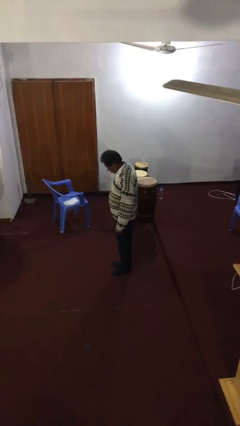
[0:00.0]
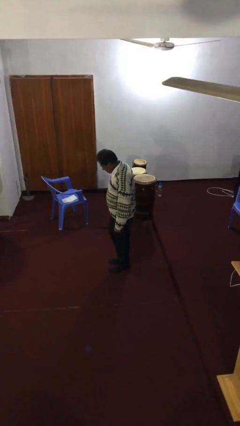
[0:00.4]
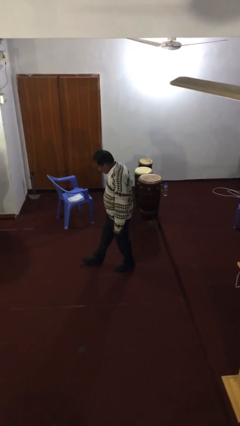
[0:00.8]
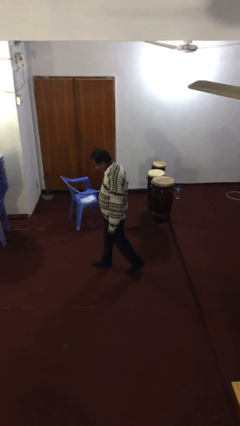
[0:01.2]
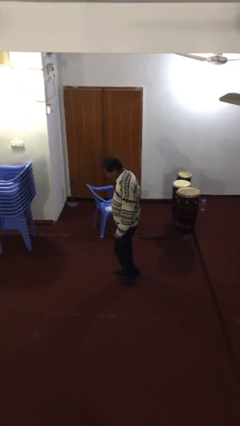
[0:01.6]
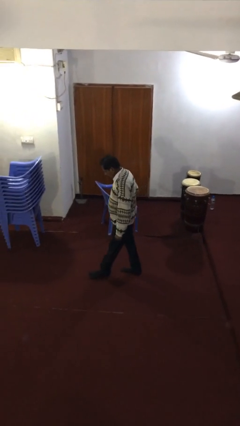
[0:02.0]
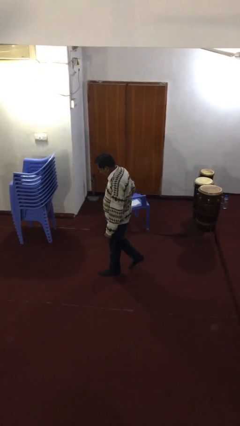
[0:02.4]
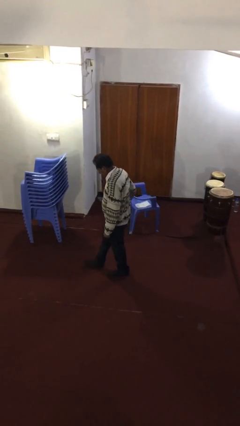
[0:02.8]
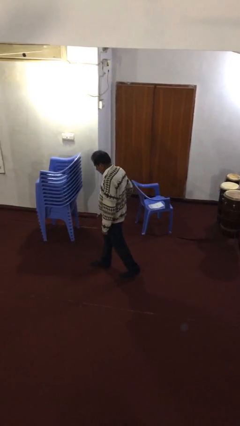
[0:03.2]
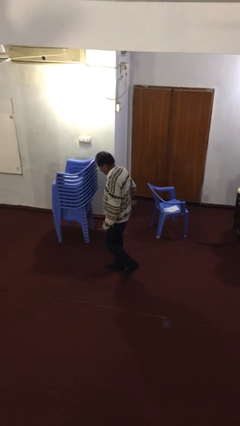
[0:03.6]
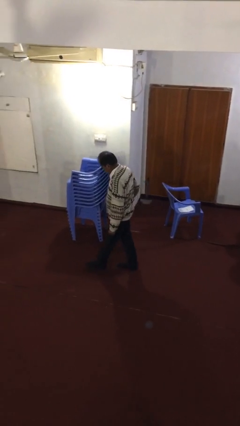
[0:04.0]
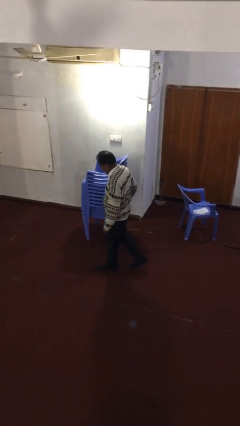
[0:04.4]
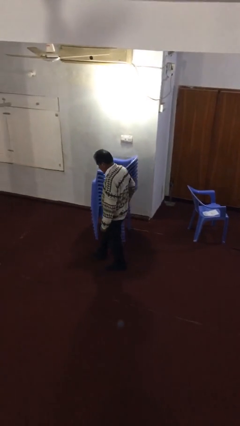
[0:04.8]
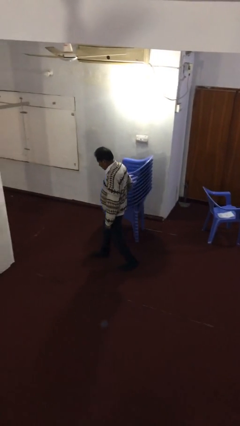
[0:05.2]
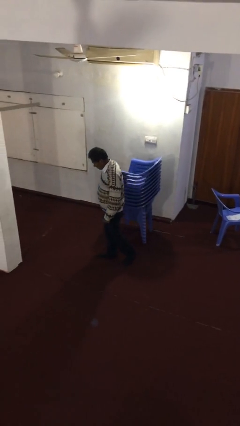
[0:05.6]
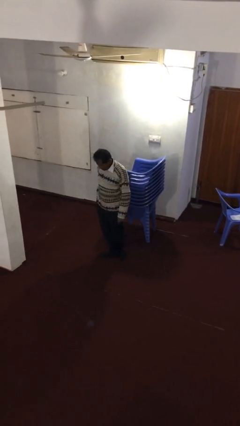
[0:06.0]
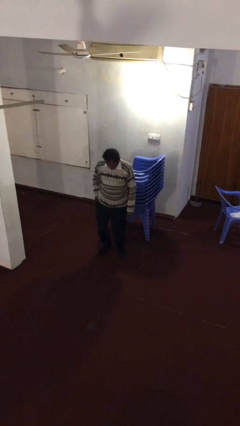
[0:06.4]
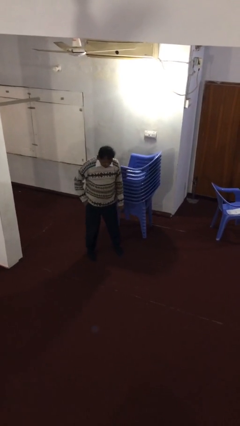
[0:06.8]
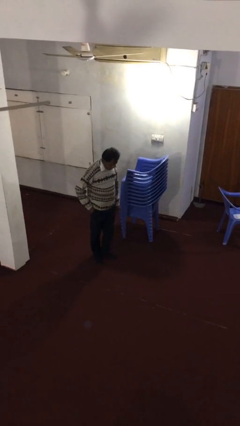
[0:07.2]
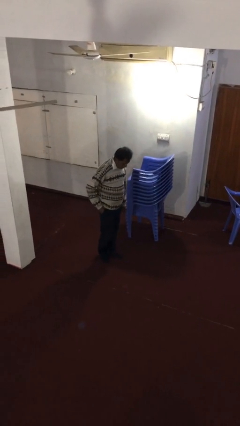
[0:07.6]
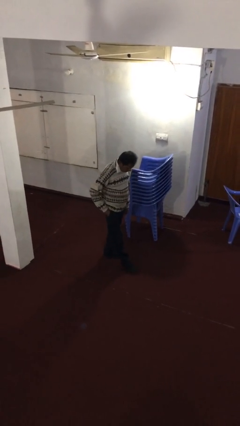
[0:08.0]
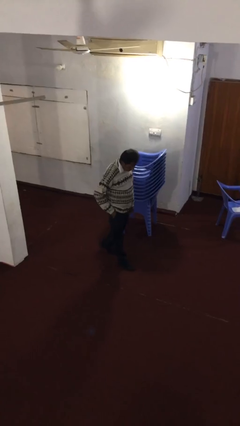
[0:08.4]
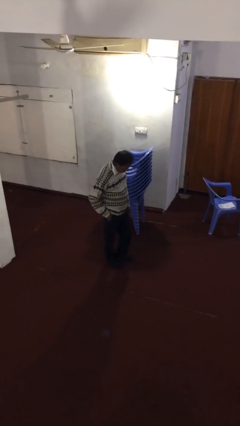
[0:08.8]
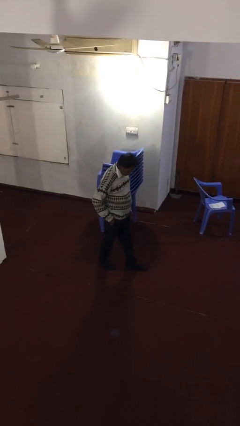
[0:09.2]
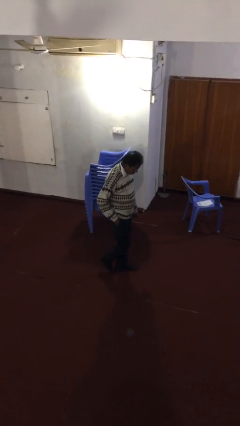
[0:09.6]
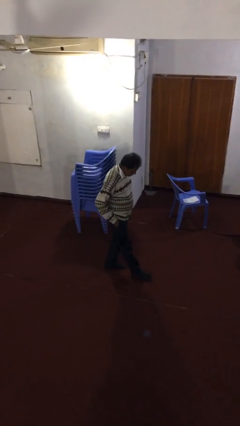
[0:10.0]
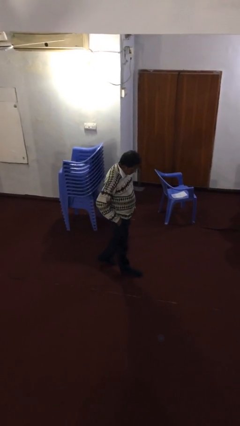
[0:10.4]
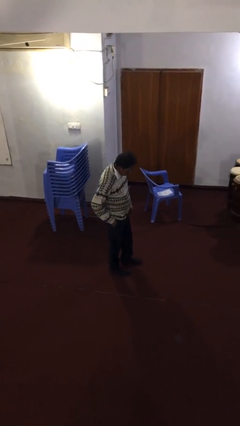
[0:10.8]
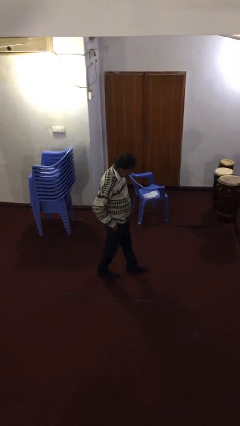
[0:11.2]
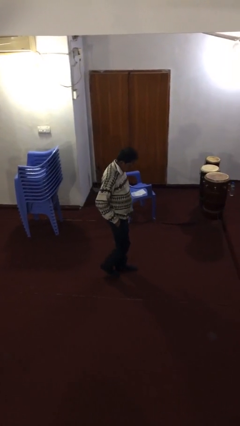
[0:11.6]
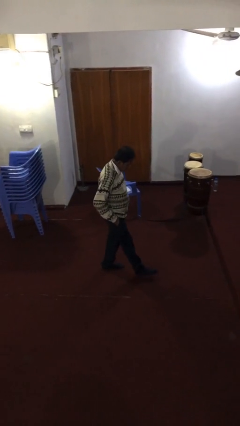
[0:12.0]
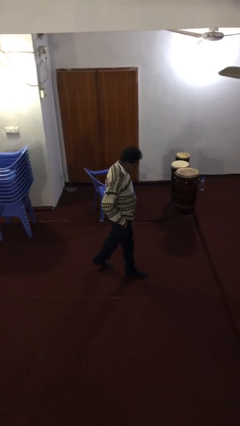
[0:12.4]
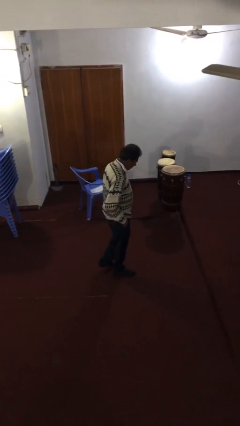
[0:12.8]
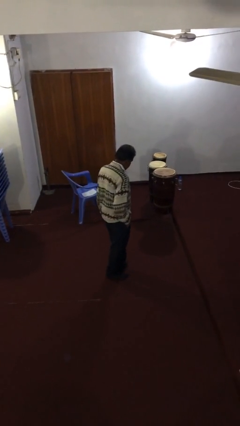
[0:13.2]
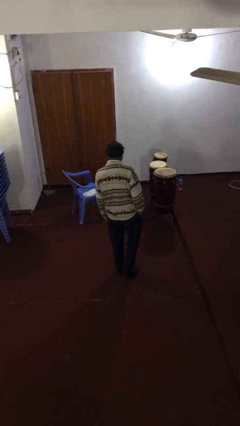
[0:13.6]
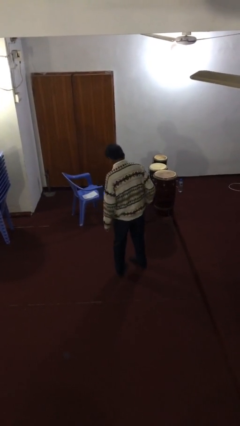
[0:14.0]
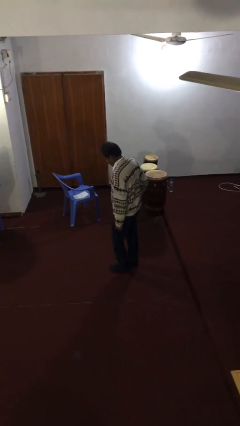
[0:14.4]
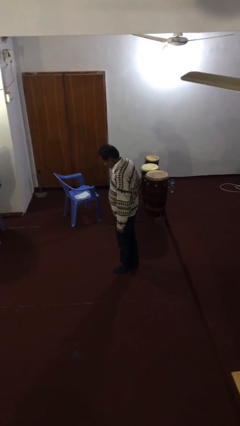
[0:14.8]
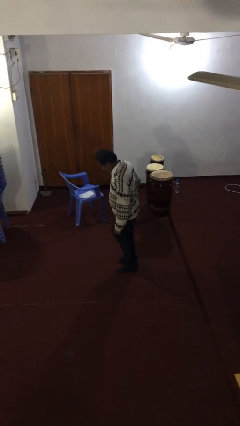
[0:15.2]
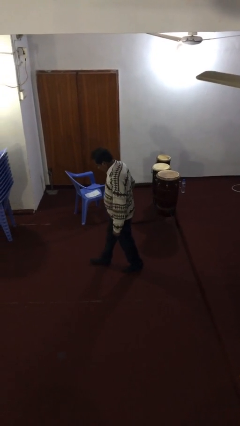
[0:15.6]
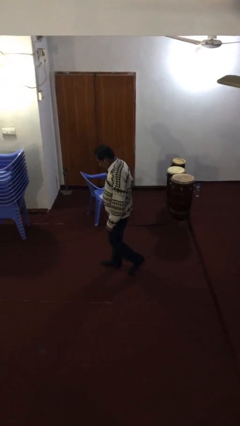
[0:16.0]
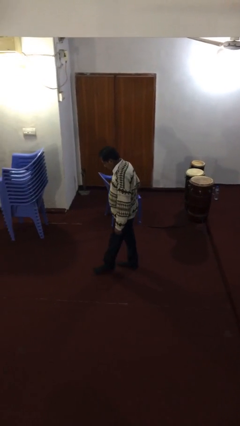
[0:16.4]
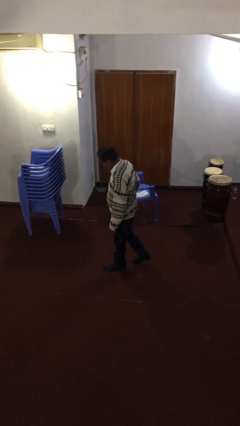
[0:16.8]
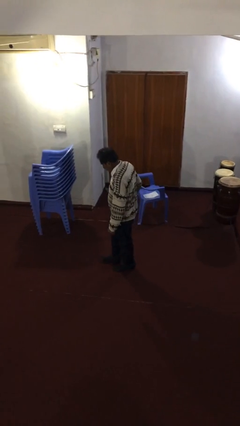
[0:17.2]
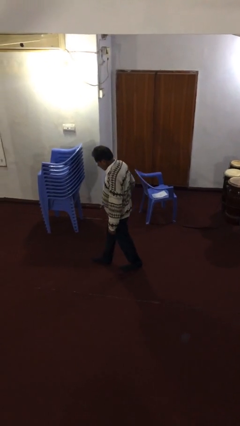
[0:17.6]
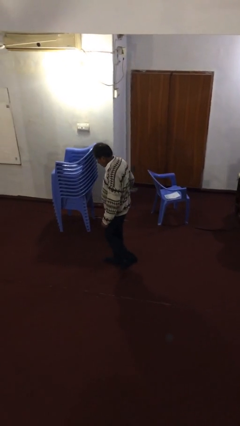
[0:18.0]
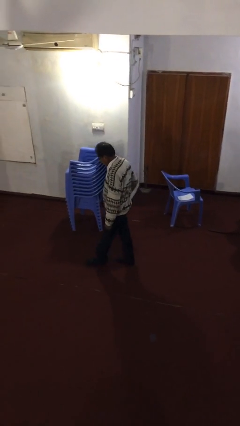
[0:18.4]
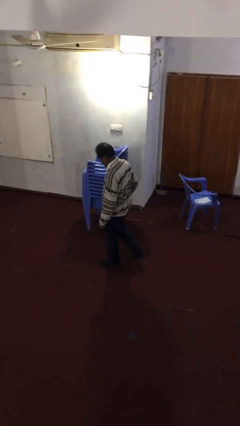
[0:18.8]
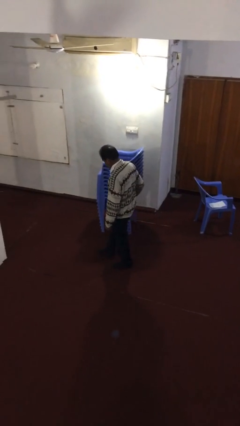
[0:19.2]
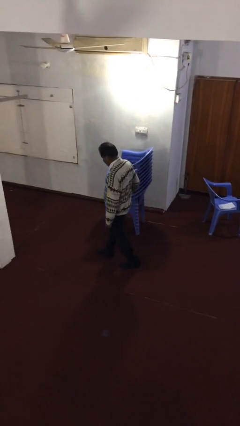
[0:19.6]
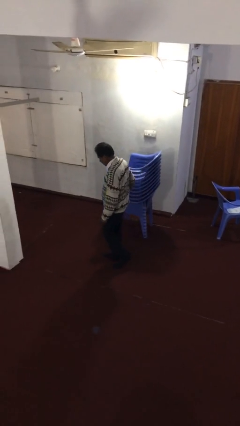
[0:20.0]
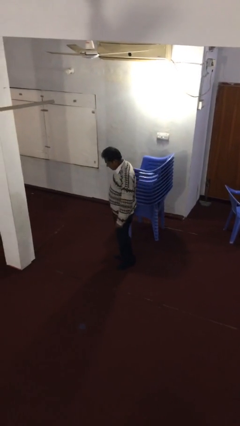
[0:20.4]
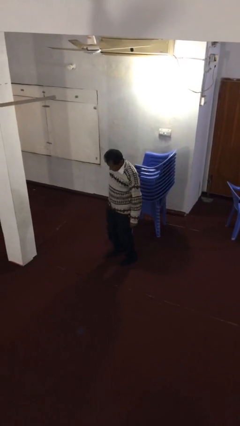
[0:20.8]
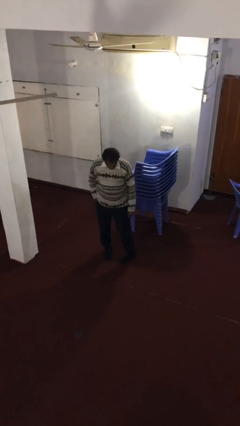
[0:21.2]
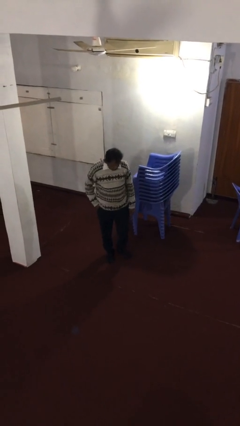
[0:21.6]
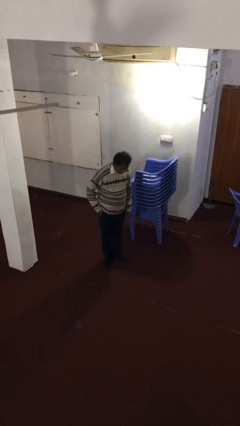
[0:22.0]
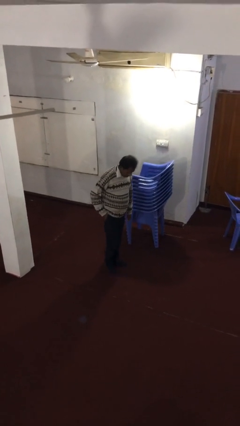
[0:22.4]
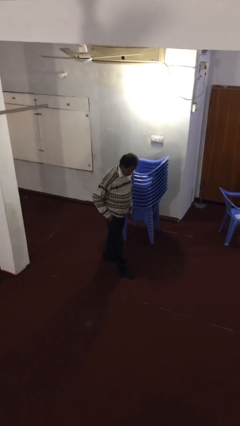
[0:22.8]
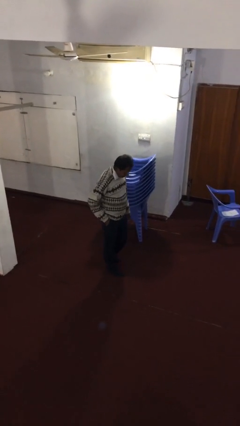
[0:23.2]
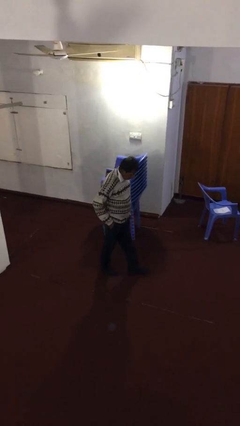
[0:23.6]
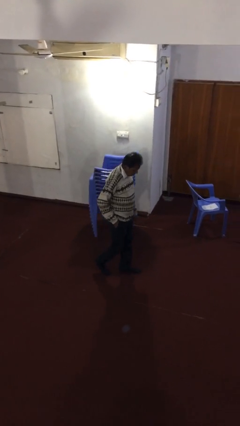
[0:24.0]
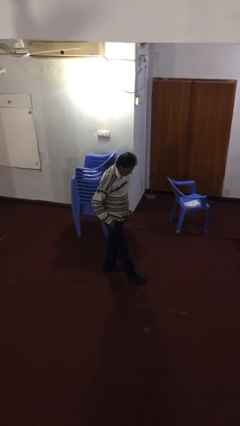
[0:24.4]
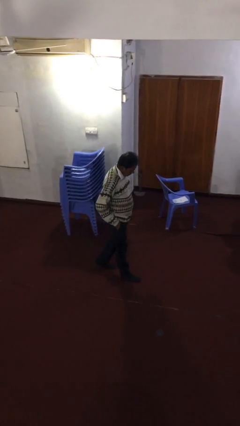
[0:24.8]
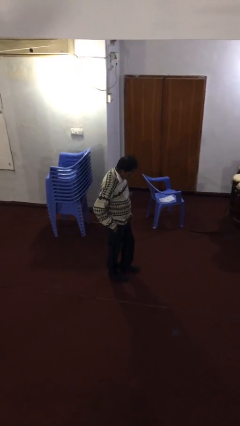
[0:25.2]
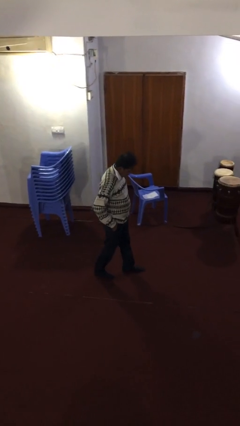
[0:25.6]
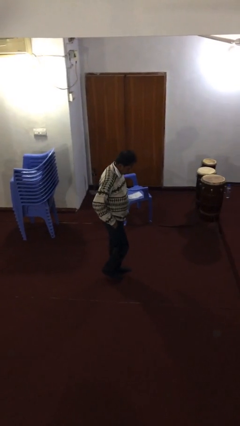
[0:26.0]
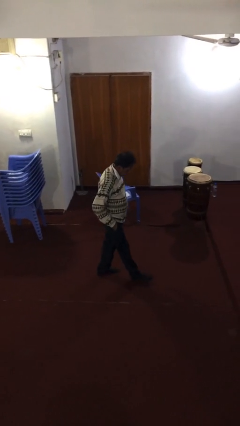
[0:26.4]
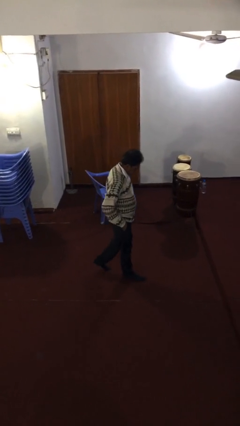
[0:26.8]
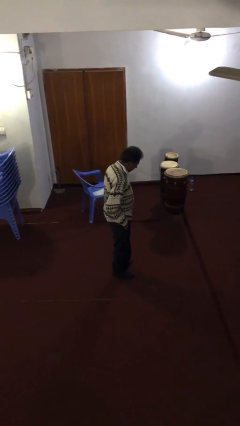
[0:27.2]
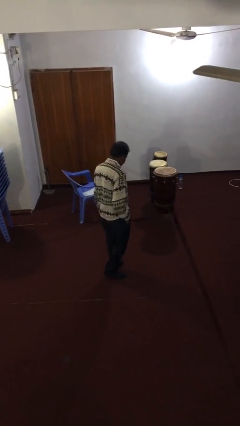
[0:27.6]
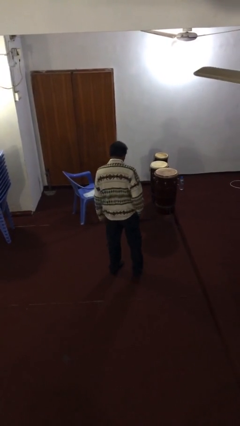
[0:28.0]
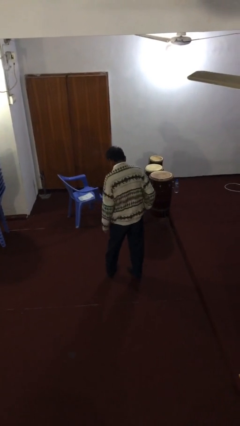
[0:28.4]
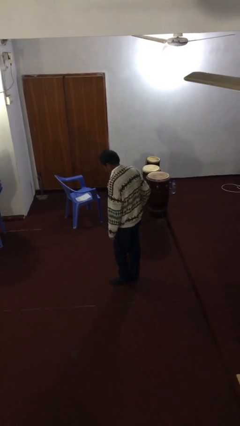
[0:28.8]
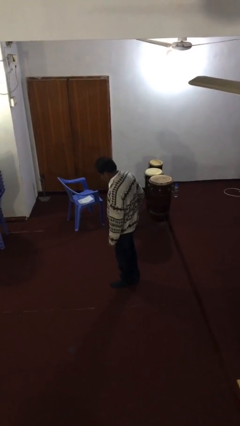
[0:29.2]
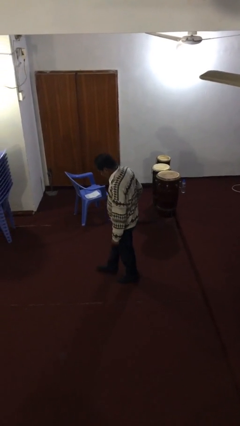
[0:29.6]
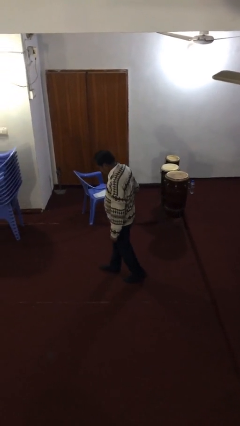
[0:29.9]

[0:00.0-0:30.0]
person walks

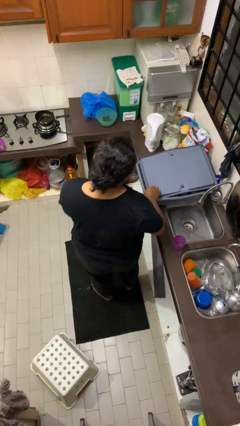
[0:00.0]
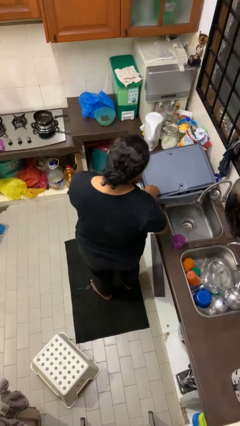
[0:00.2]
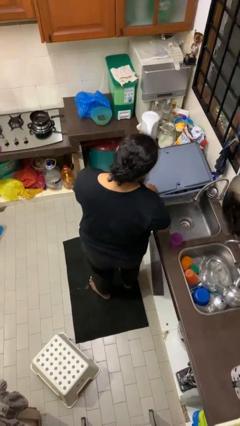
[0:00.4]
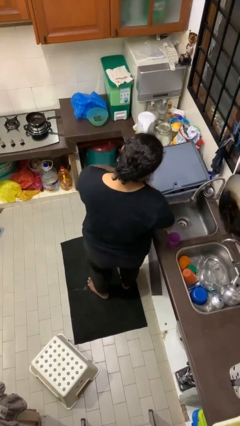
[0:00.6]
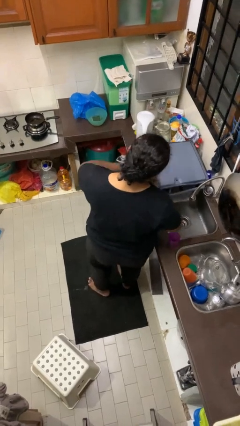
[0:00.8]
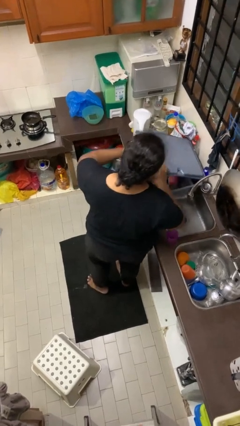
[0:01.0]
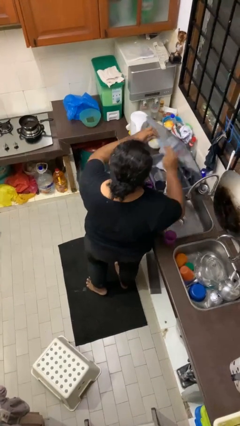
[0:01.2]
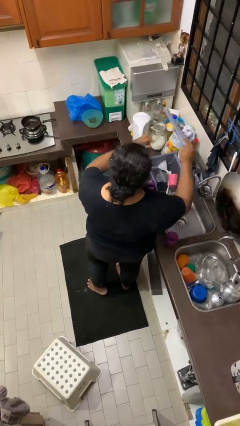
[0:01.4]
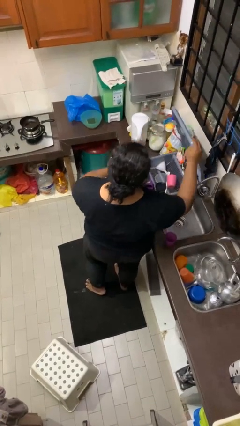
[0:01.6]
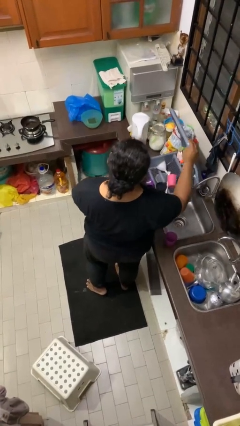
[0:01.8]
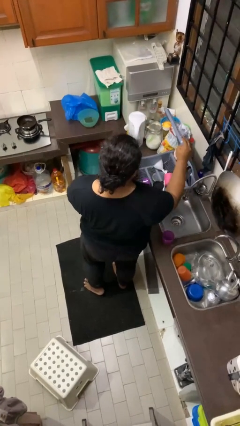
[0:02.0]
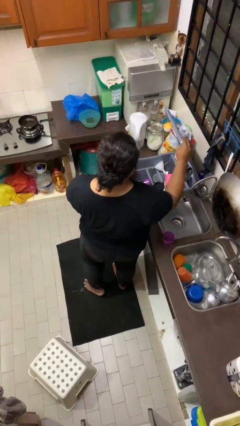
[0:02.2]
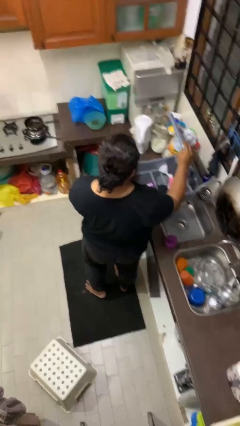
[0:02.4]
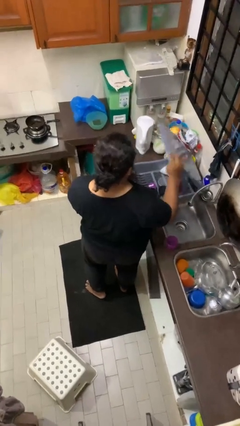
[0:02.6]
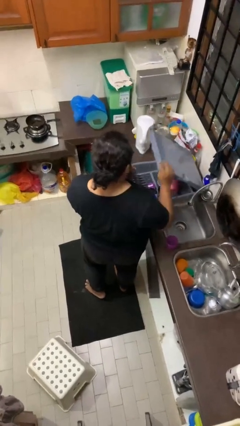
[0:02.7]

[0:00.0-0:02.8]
person opens dishwasher
